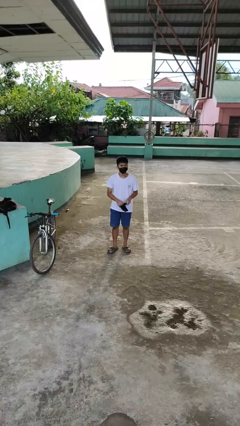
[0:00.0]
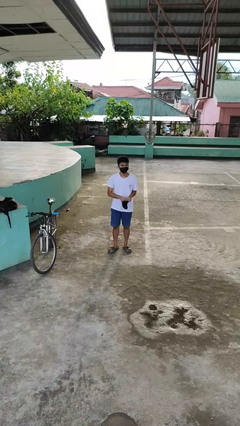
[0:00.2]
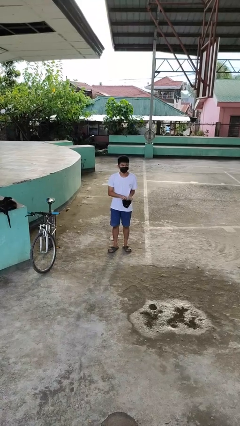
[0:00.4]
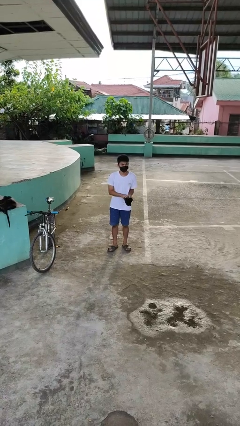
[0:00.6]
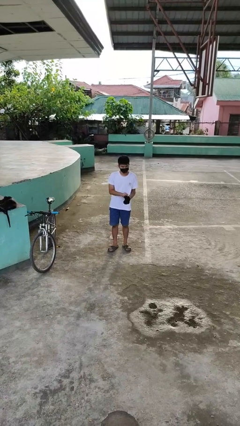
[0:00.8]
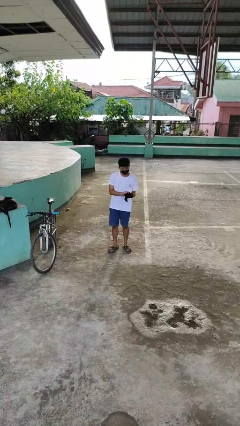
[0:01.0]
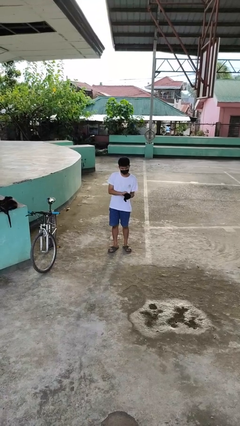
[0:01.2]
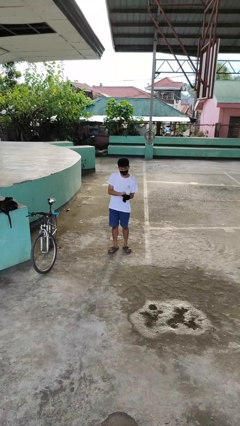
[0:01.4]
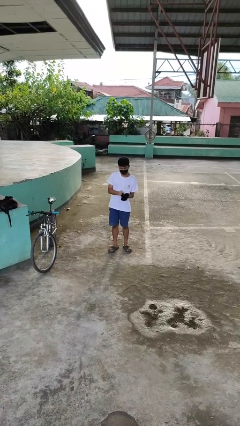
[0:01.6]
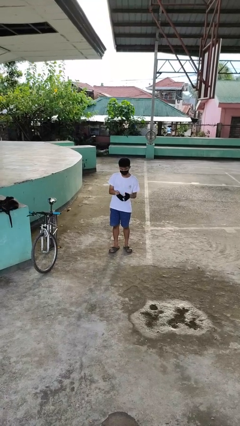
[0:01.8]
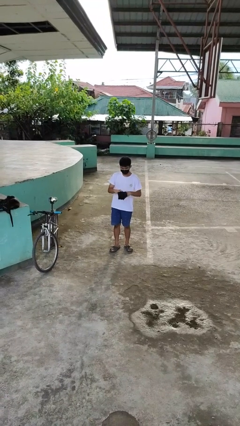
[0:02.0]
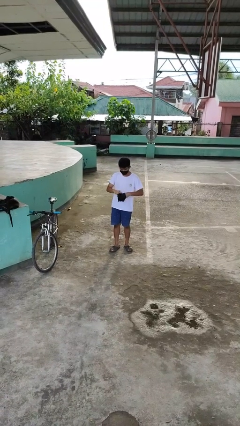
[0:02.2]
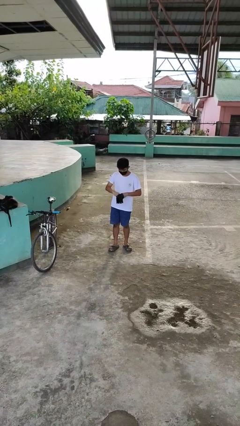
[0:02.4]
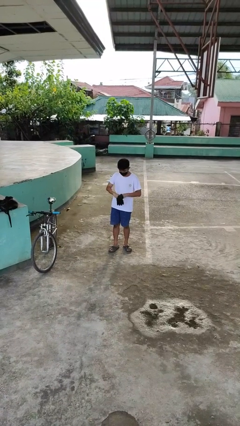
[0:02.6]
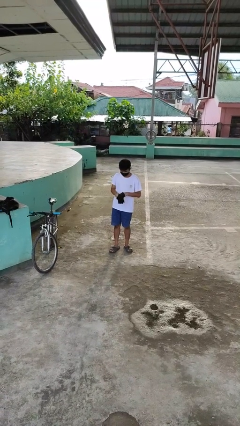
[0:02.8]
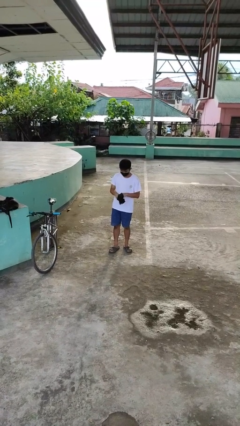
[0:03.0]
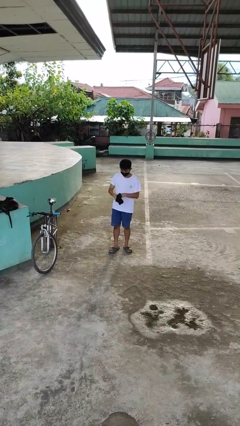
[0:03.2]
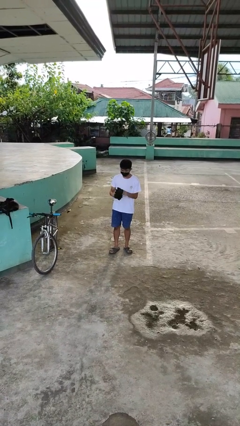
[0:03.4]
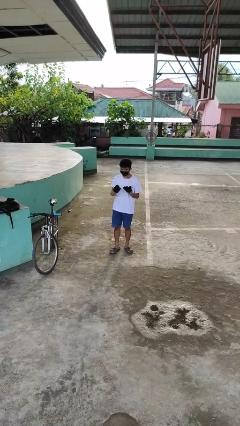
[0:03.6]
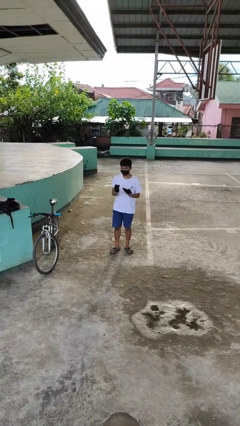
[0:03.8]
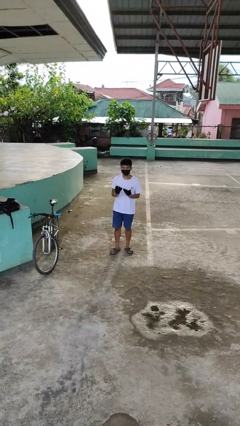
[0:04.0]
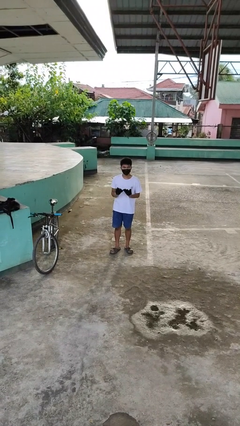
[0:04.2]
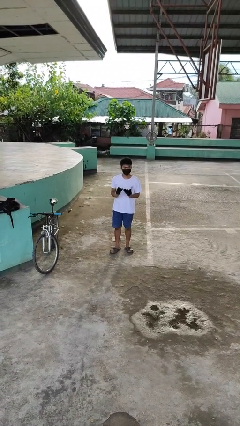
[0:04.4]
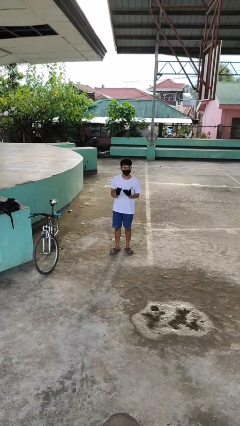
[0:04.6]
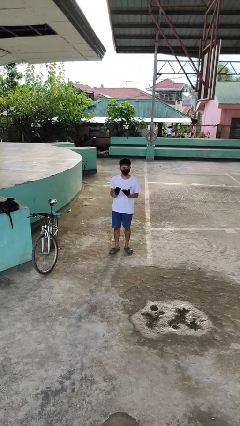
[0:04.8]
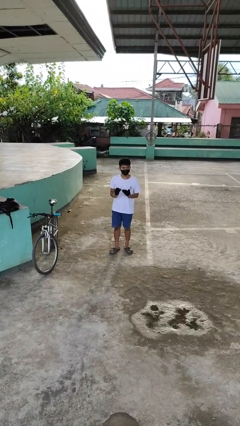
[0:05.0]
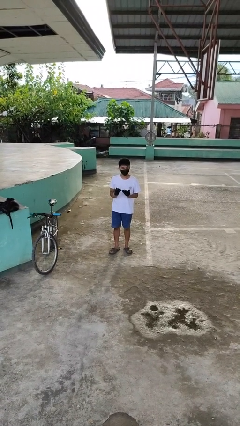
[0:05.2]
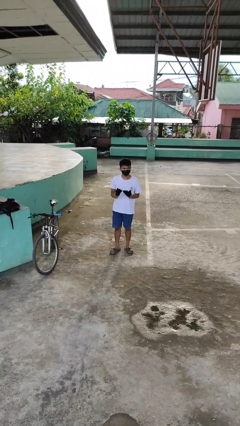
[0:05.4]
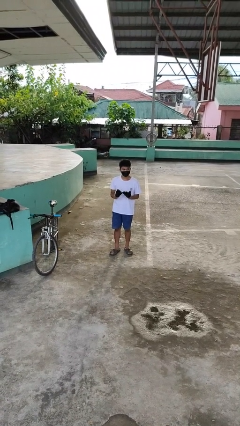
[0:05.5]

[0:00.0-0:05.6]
person puts on gloves

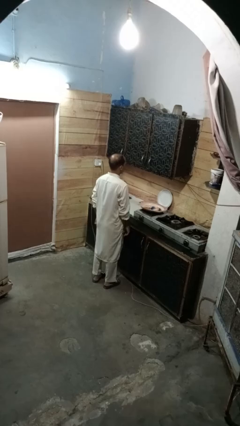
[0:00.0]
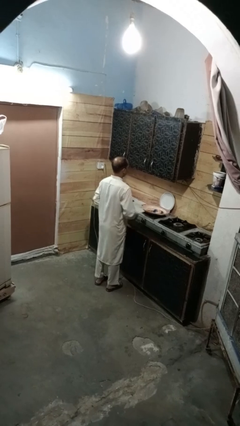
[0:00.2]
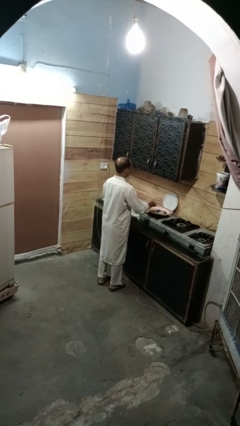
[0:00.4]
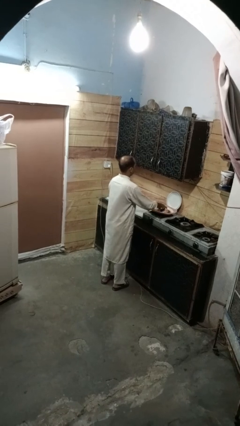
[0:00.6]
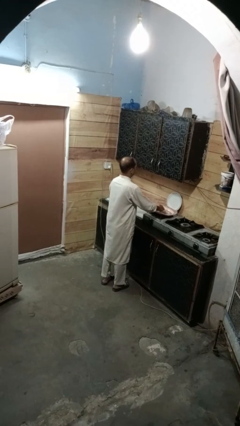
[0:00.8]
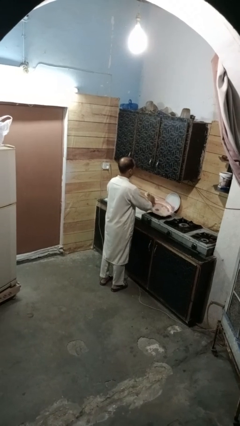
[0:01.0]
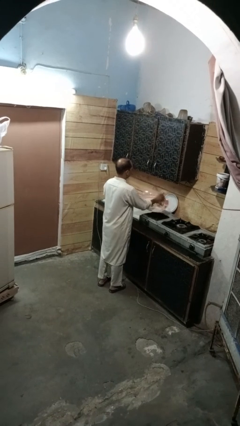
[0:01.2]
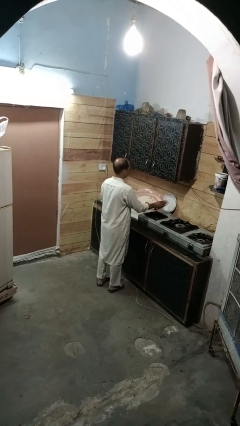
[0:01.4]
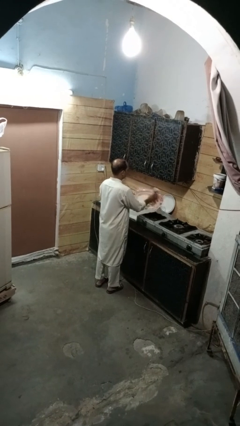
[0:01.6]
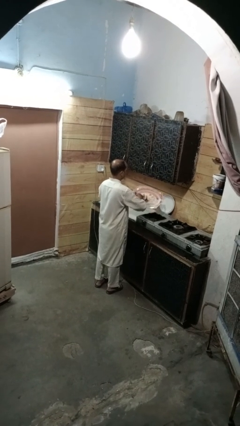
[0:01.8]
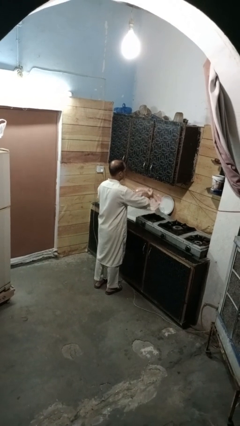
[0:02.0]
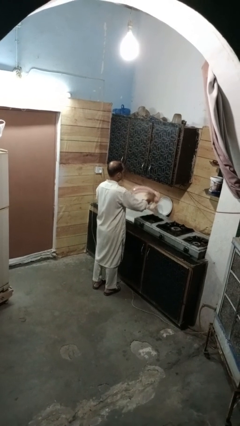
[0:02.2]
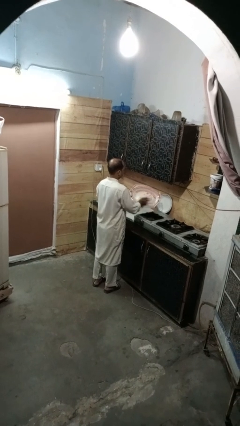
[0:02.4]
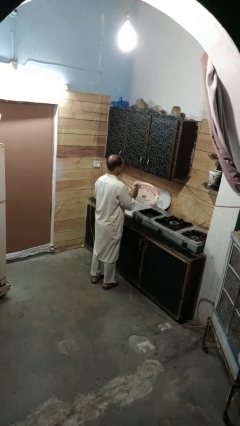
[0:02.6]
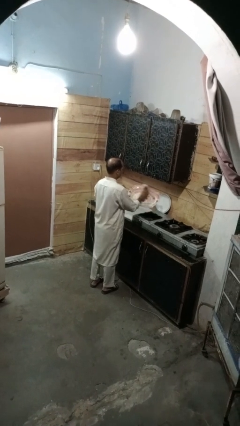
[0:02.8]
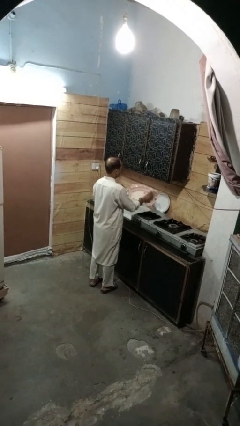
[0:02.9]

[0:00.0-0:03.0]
person dries dish

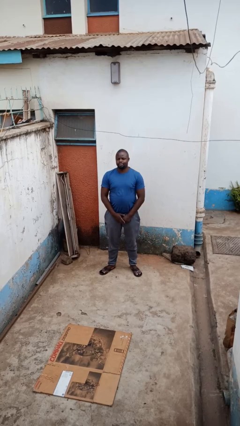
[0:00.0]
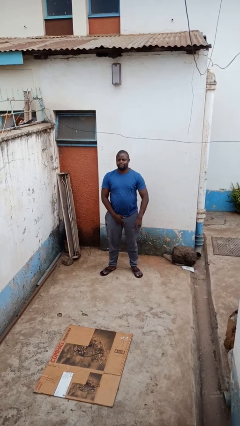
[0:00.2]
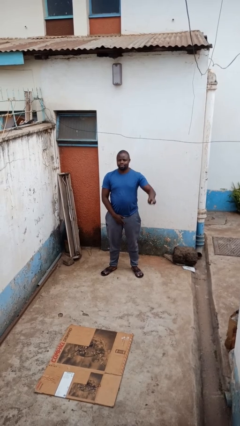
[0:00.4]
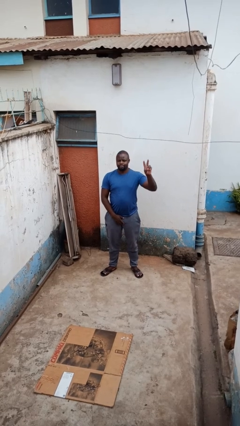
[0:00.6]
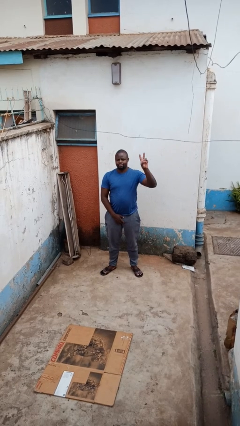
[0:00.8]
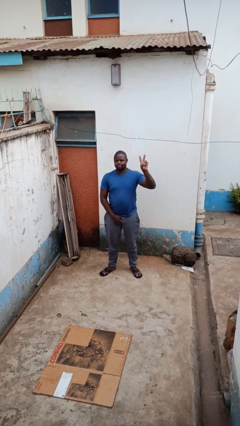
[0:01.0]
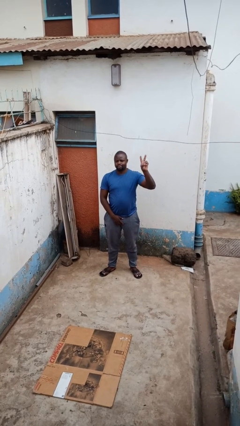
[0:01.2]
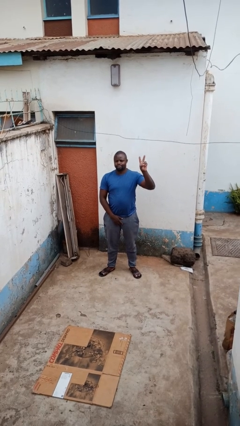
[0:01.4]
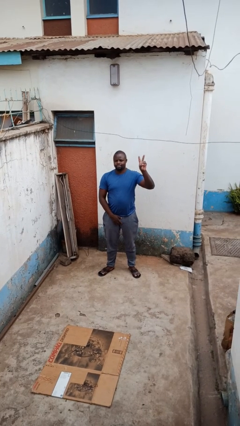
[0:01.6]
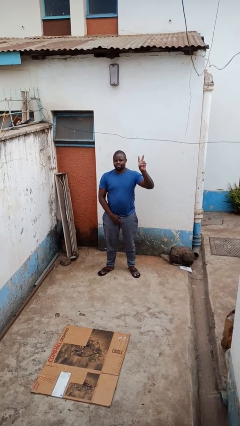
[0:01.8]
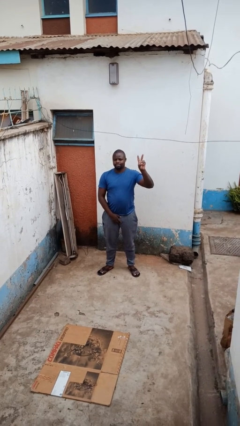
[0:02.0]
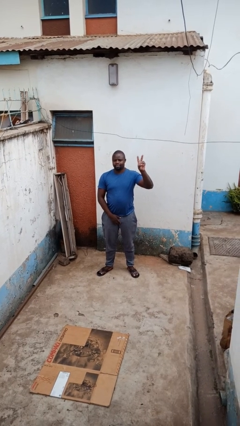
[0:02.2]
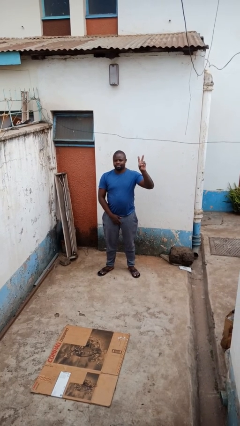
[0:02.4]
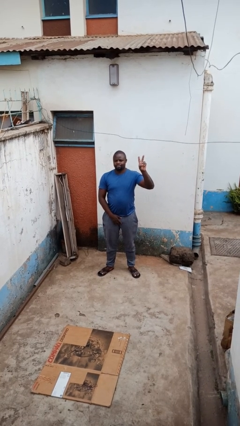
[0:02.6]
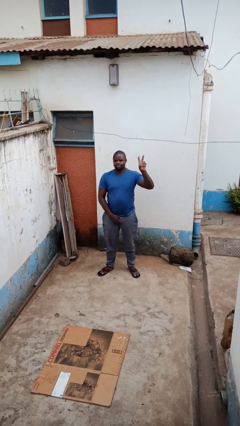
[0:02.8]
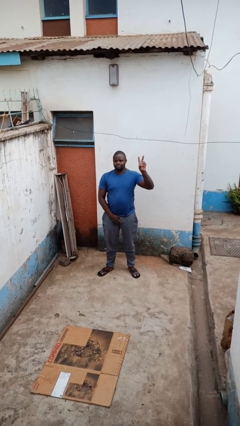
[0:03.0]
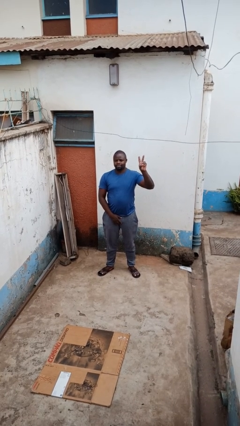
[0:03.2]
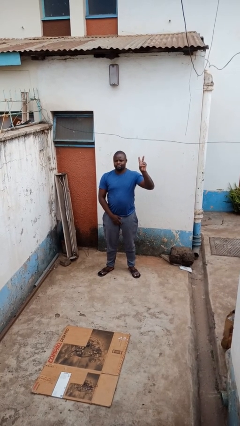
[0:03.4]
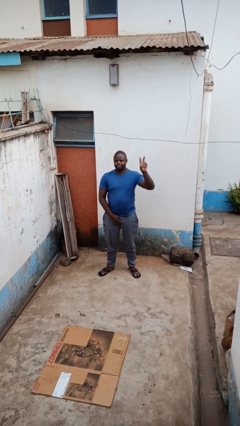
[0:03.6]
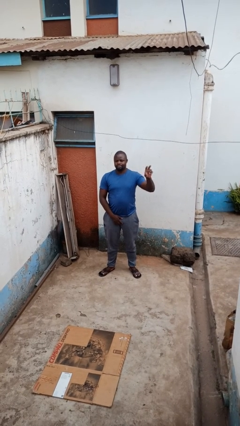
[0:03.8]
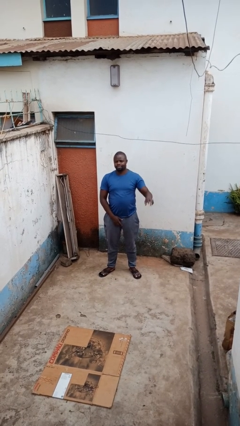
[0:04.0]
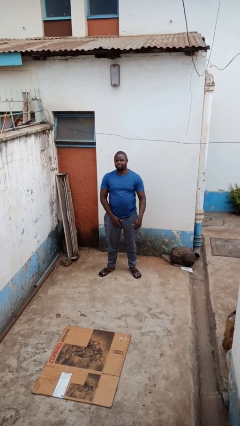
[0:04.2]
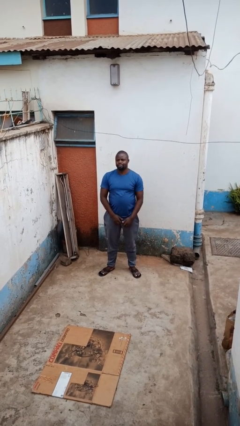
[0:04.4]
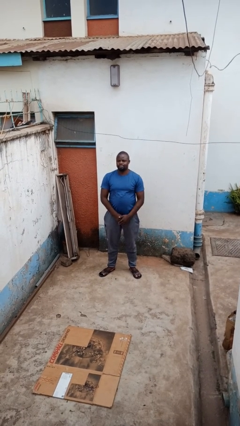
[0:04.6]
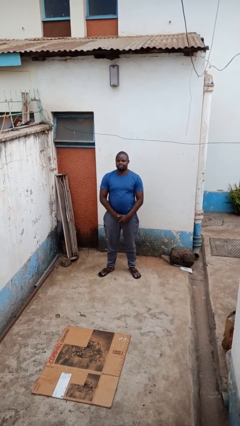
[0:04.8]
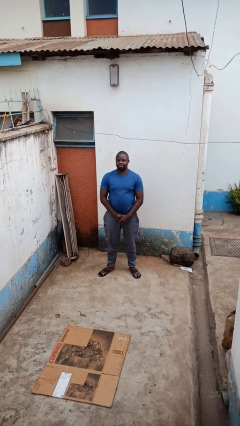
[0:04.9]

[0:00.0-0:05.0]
person gestures peace

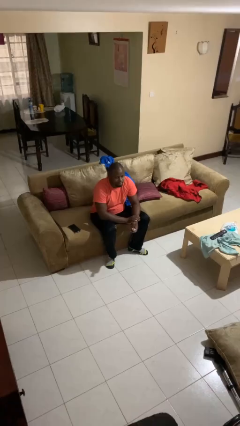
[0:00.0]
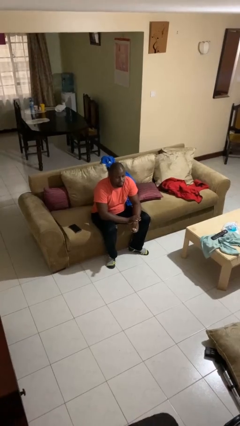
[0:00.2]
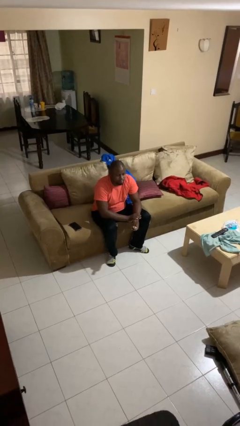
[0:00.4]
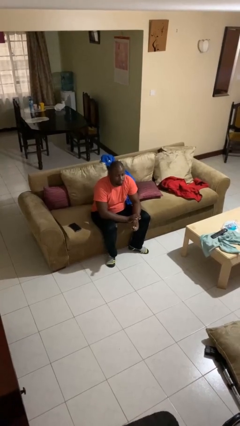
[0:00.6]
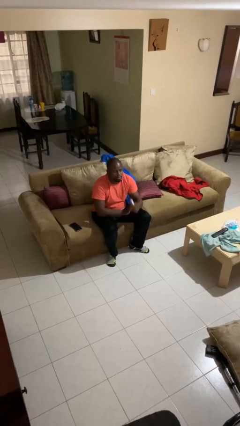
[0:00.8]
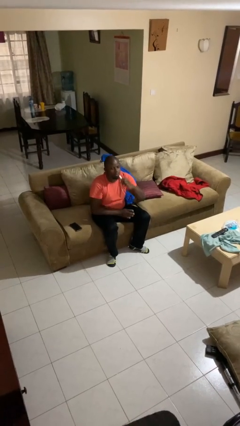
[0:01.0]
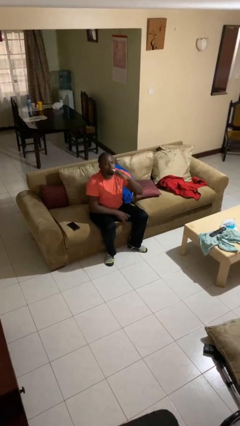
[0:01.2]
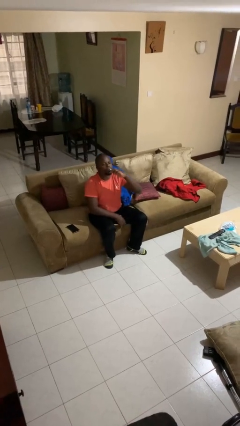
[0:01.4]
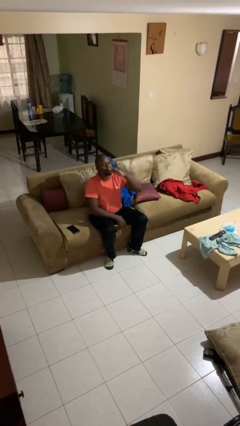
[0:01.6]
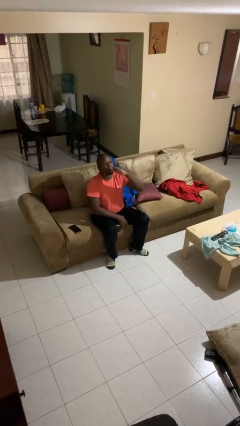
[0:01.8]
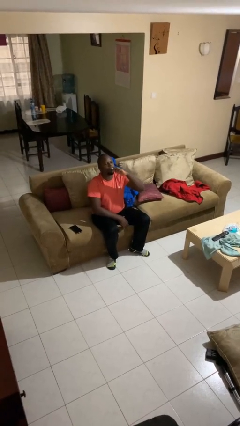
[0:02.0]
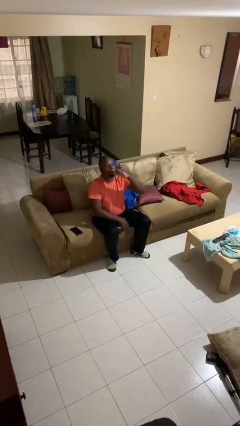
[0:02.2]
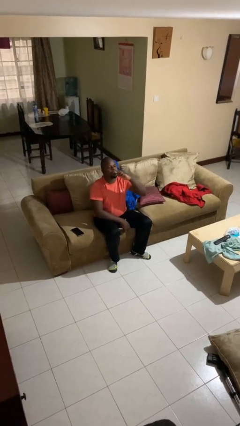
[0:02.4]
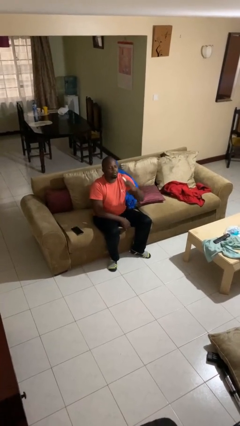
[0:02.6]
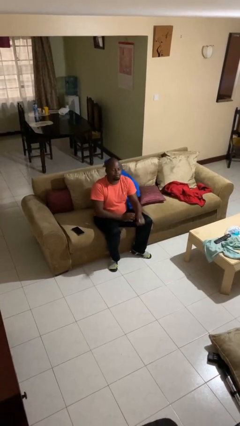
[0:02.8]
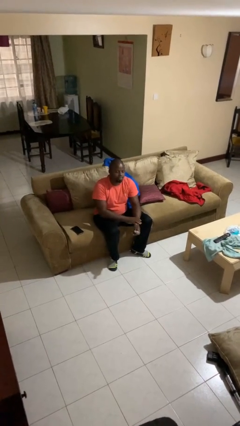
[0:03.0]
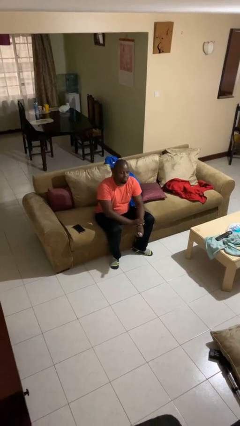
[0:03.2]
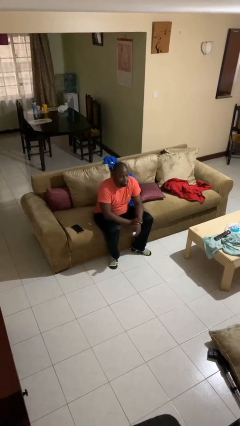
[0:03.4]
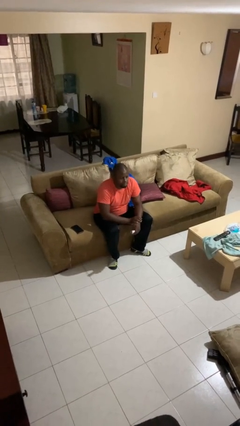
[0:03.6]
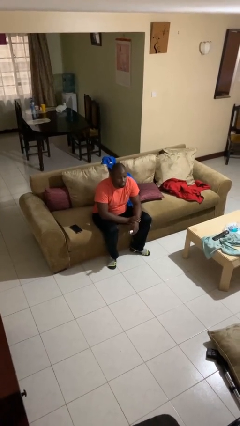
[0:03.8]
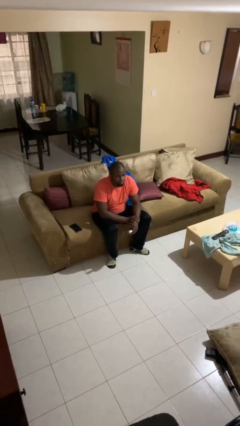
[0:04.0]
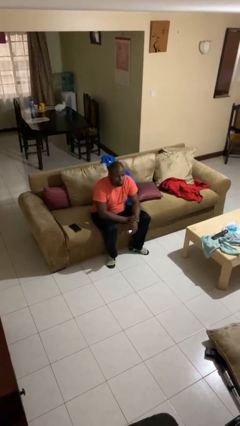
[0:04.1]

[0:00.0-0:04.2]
person vapes

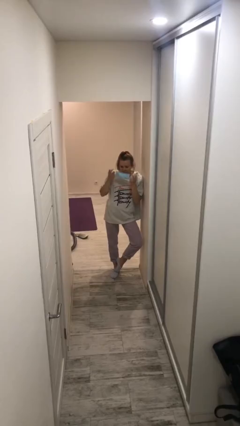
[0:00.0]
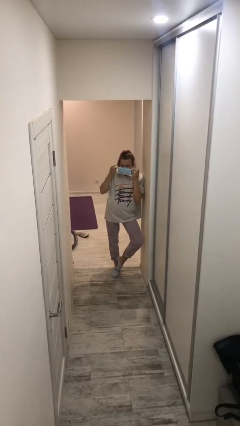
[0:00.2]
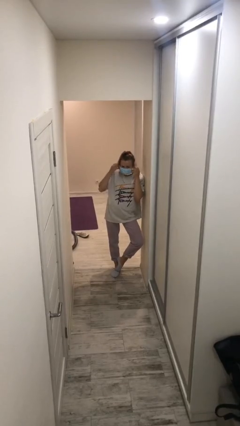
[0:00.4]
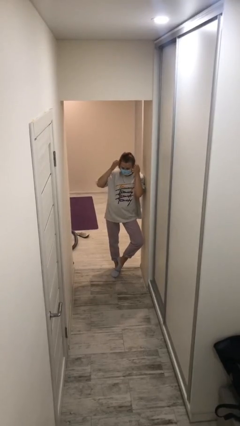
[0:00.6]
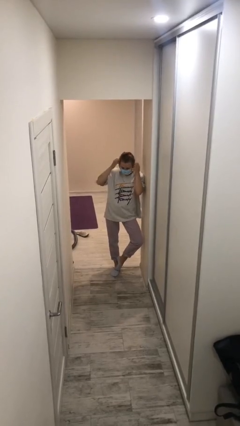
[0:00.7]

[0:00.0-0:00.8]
person puts on facemask
